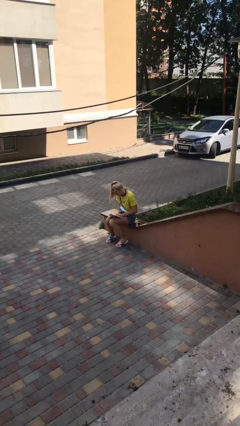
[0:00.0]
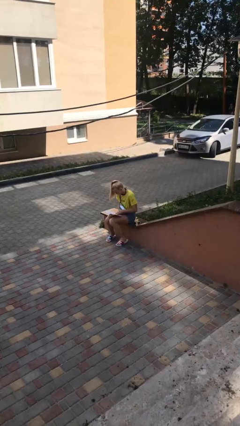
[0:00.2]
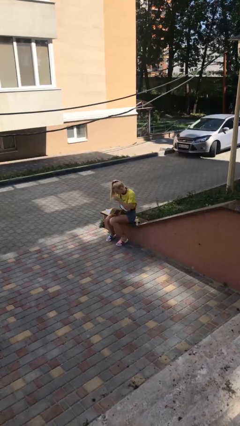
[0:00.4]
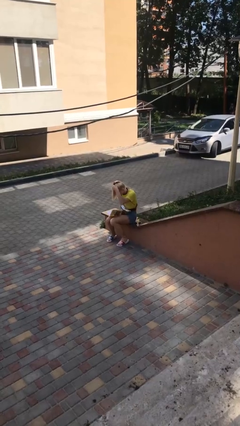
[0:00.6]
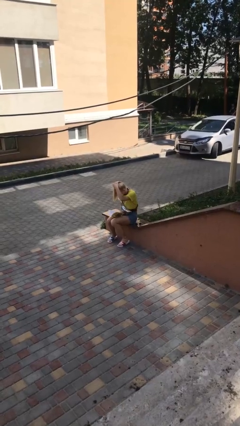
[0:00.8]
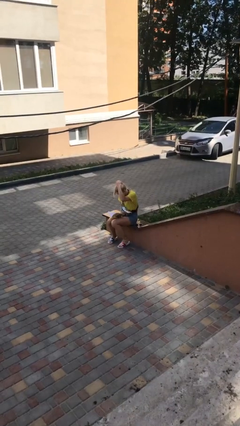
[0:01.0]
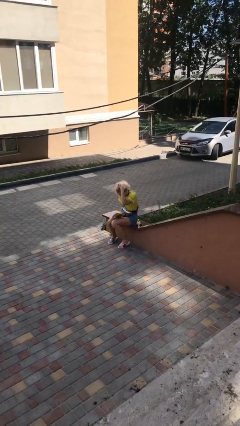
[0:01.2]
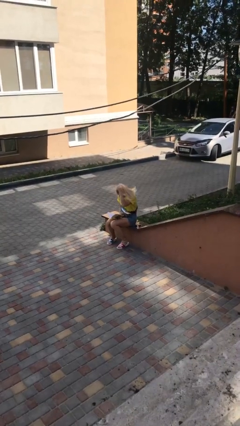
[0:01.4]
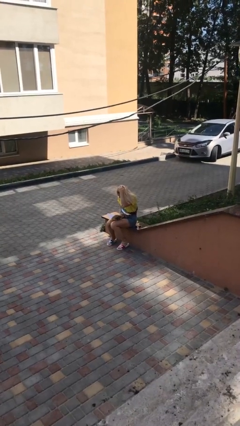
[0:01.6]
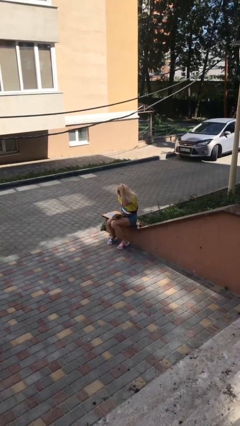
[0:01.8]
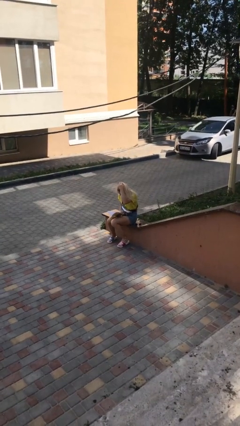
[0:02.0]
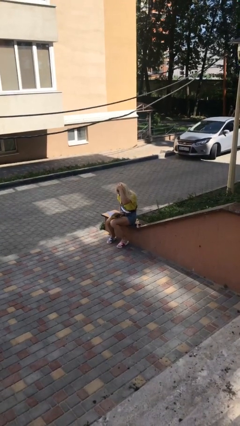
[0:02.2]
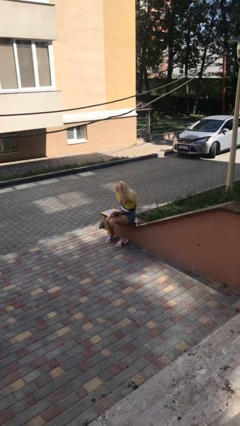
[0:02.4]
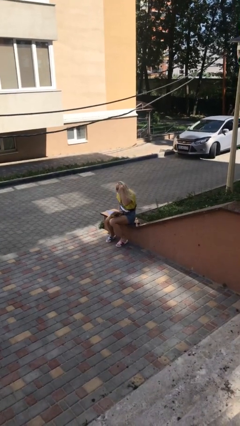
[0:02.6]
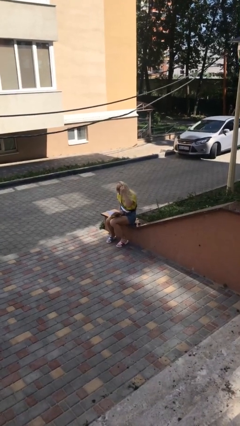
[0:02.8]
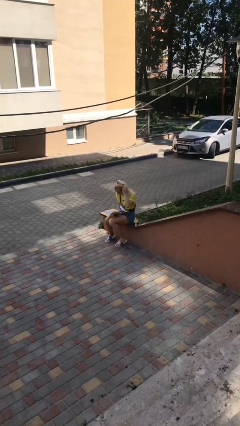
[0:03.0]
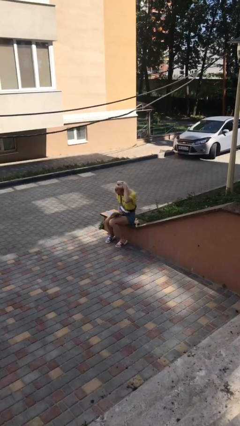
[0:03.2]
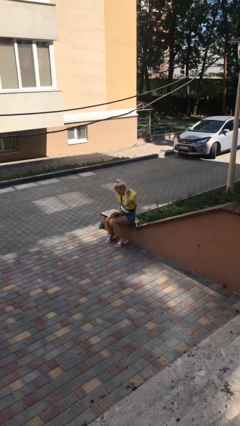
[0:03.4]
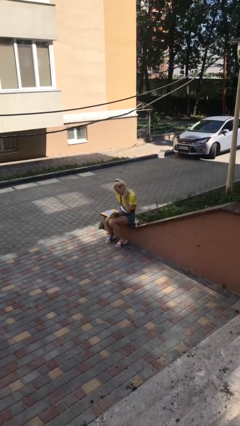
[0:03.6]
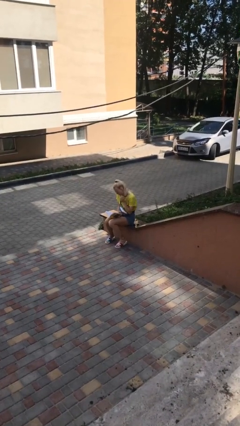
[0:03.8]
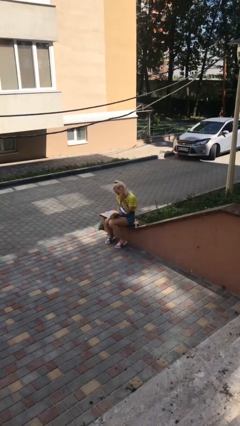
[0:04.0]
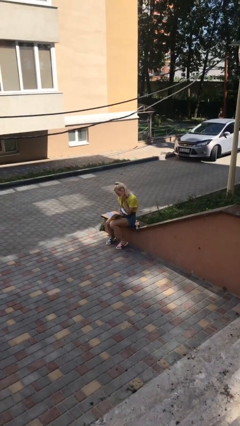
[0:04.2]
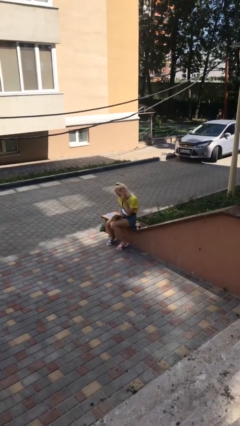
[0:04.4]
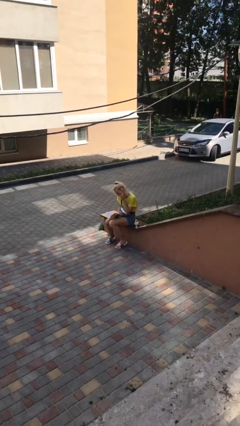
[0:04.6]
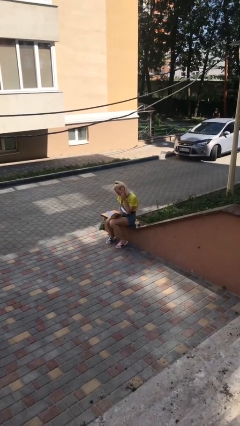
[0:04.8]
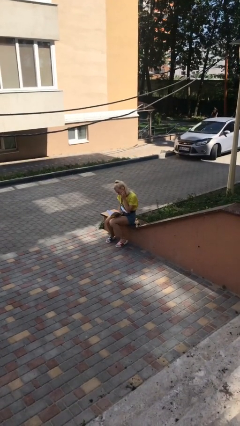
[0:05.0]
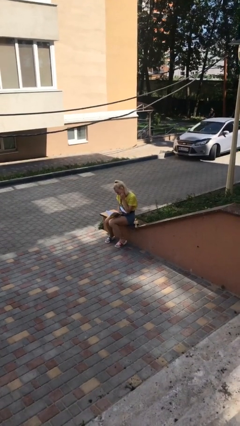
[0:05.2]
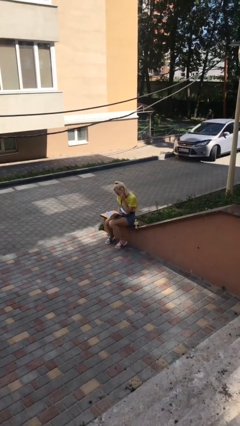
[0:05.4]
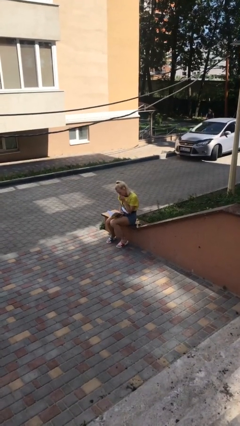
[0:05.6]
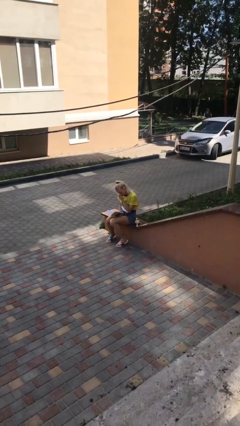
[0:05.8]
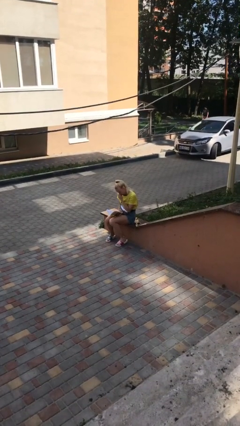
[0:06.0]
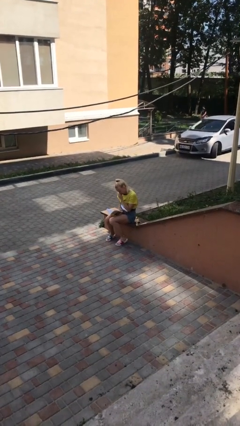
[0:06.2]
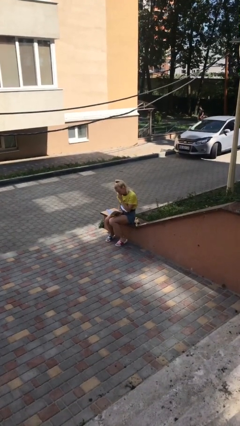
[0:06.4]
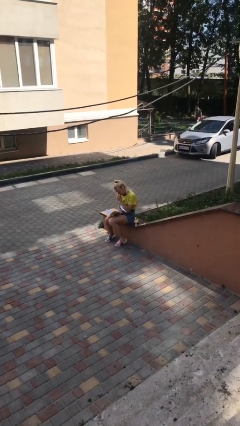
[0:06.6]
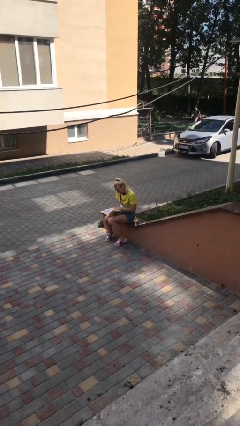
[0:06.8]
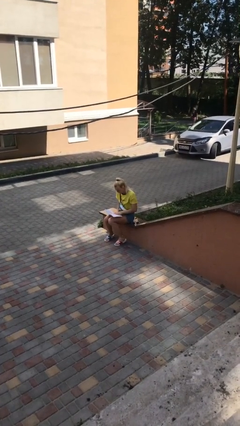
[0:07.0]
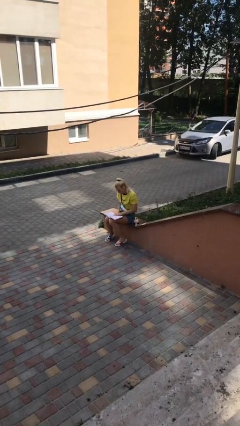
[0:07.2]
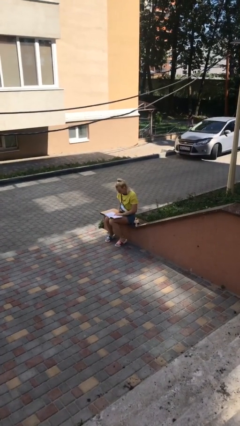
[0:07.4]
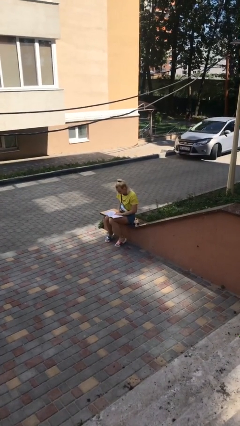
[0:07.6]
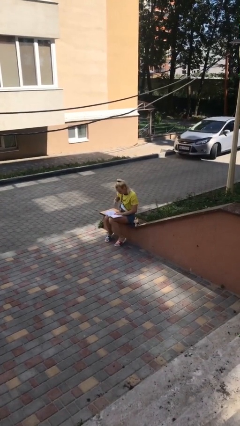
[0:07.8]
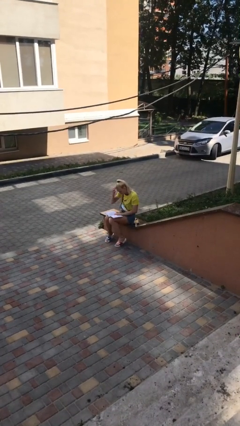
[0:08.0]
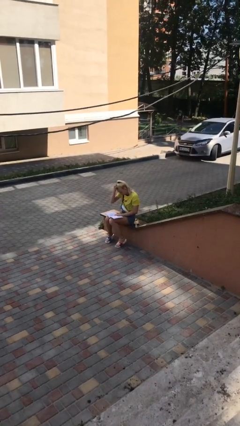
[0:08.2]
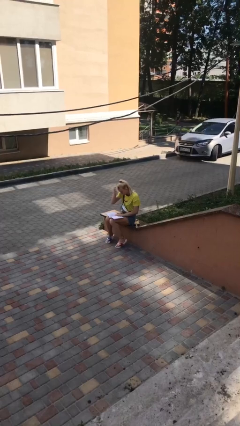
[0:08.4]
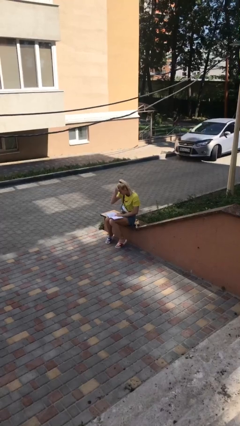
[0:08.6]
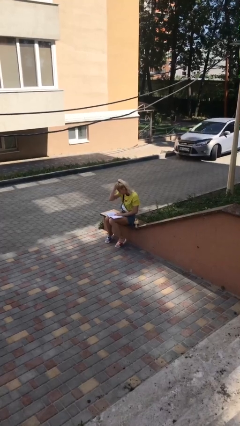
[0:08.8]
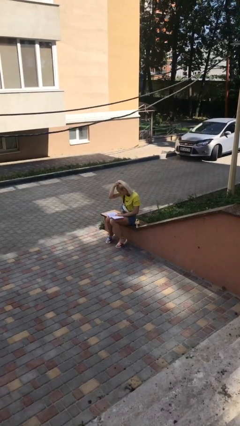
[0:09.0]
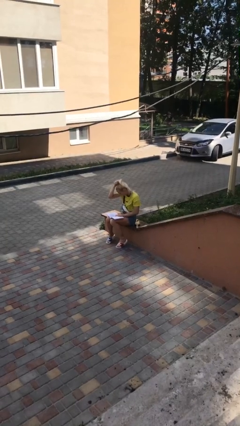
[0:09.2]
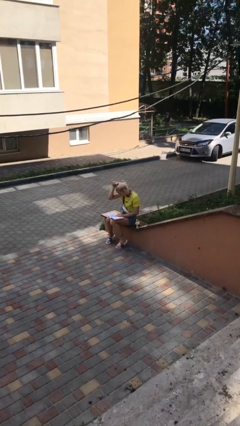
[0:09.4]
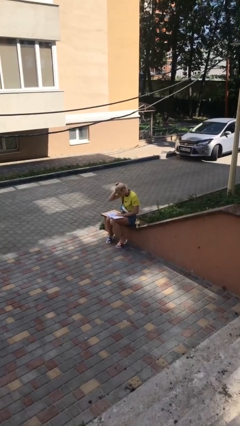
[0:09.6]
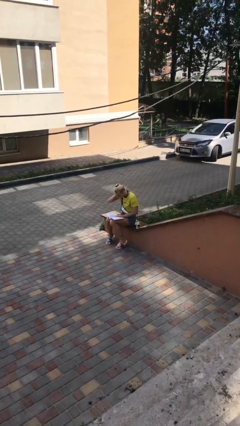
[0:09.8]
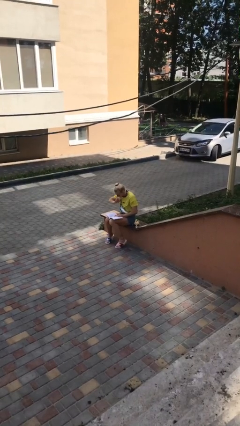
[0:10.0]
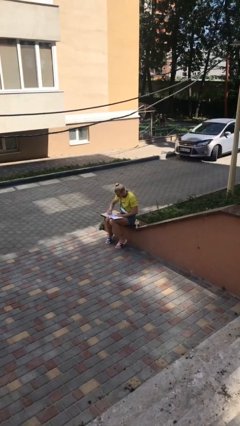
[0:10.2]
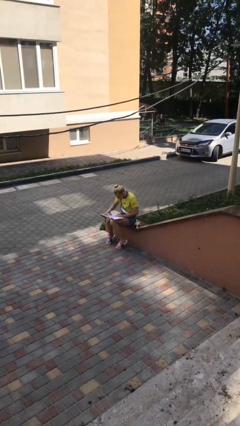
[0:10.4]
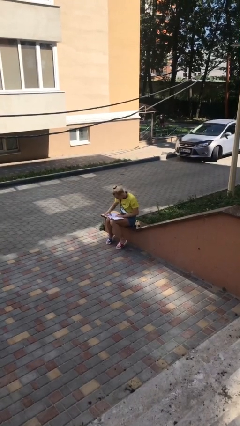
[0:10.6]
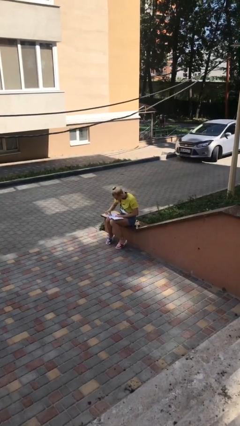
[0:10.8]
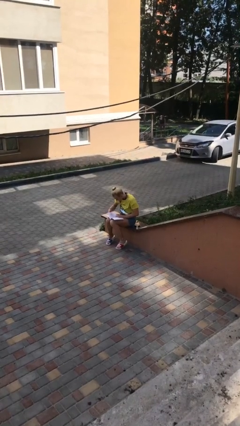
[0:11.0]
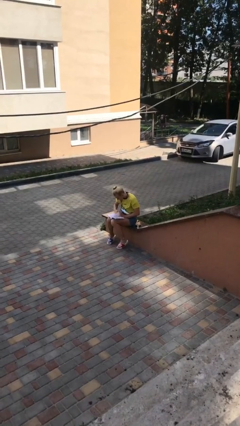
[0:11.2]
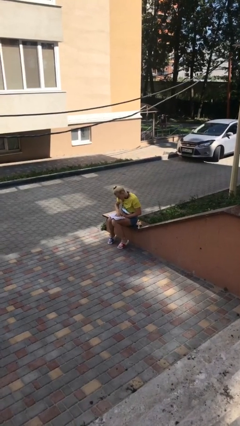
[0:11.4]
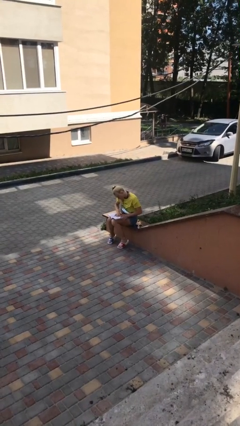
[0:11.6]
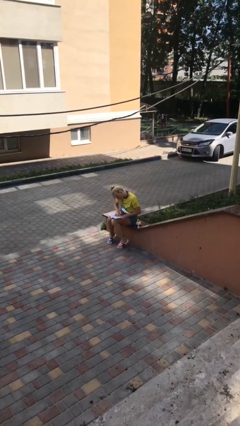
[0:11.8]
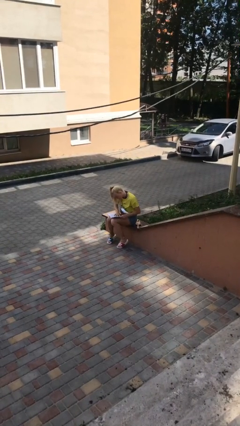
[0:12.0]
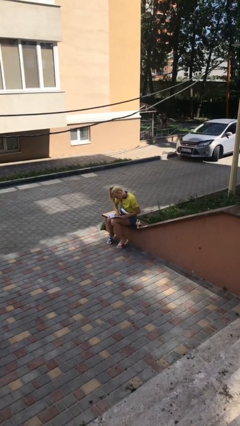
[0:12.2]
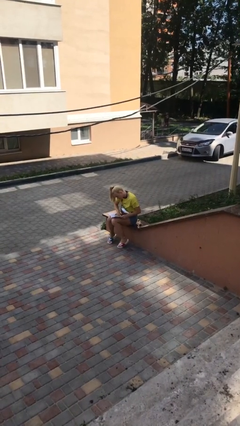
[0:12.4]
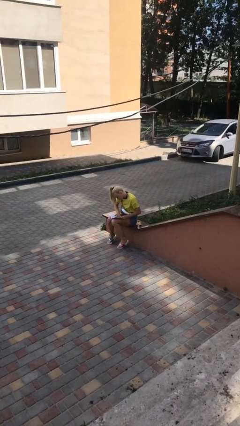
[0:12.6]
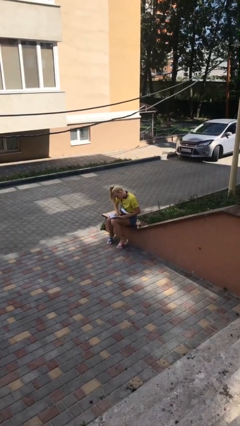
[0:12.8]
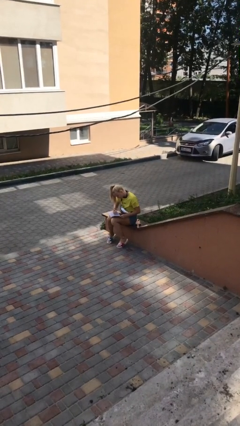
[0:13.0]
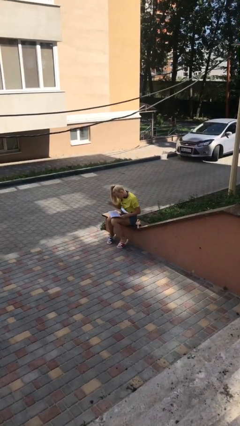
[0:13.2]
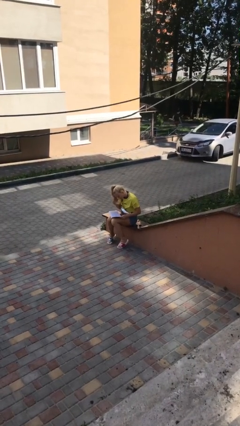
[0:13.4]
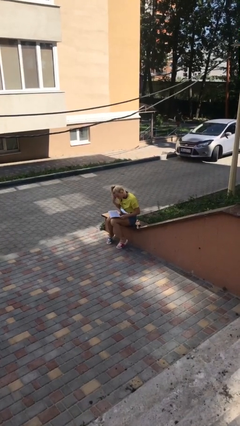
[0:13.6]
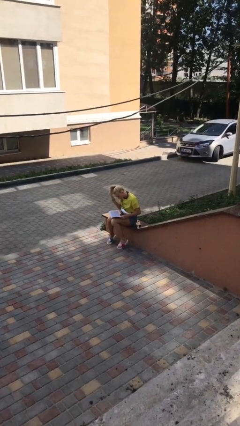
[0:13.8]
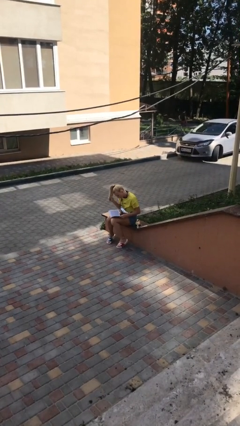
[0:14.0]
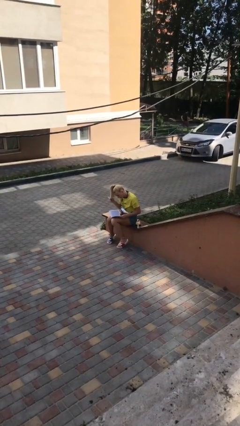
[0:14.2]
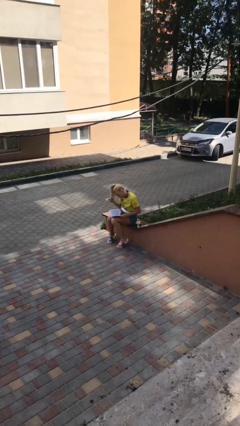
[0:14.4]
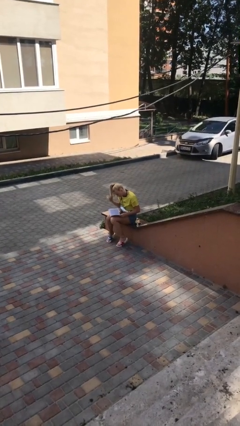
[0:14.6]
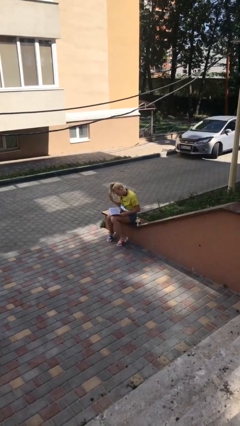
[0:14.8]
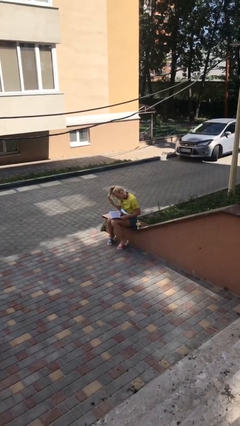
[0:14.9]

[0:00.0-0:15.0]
person reads document

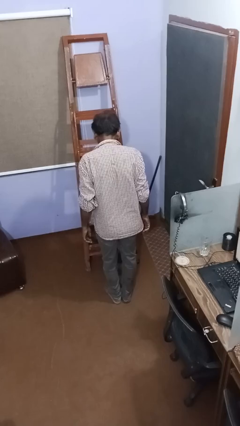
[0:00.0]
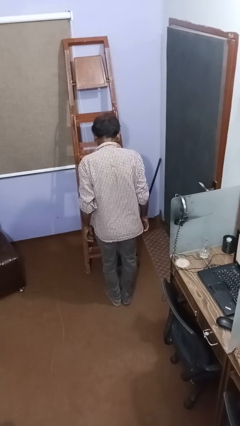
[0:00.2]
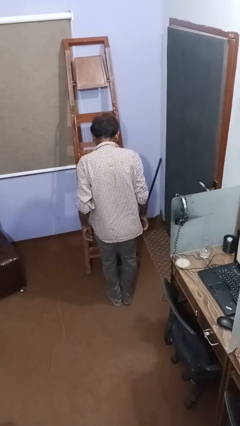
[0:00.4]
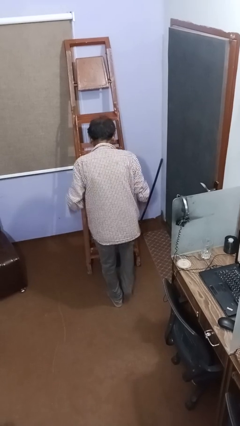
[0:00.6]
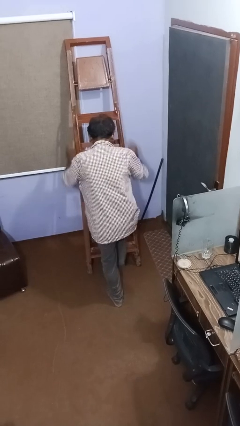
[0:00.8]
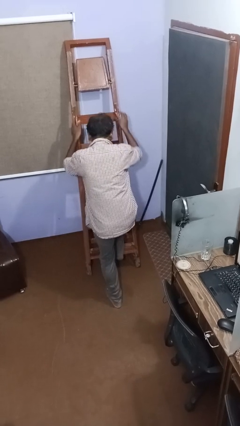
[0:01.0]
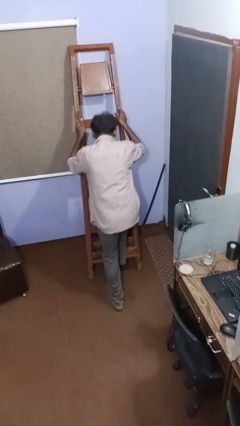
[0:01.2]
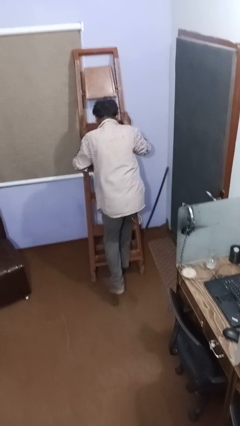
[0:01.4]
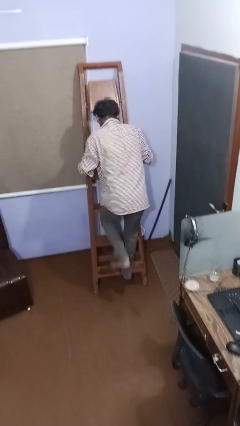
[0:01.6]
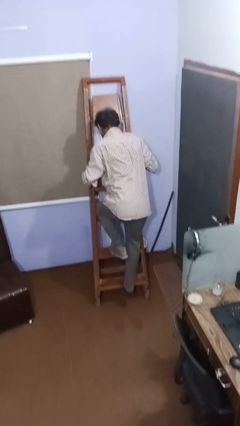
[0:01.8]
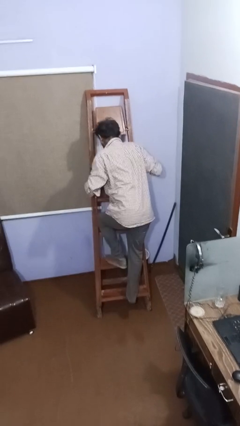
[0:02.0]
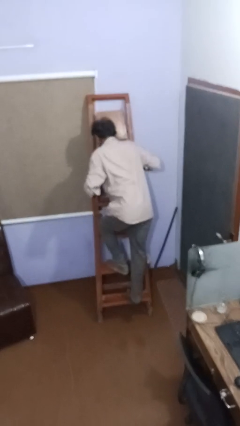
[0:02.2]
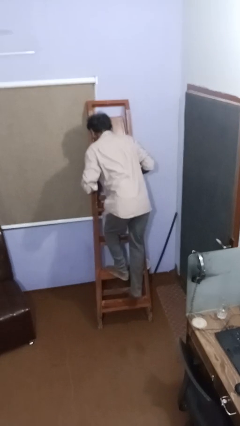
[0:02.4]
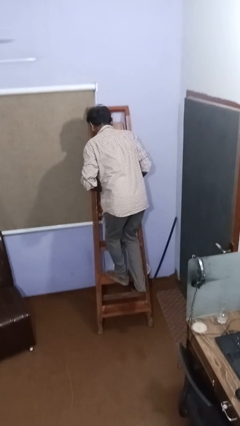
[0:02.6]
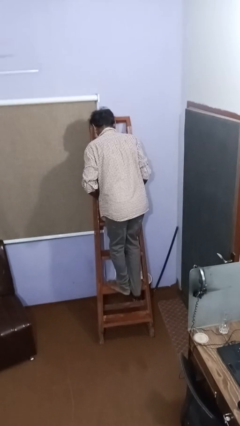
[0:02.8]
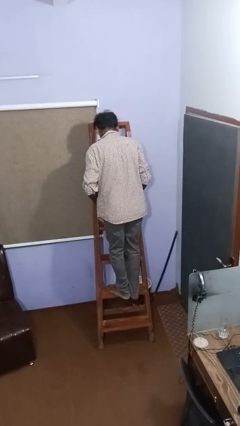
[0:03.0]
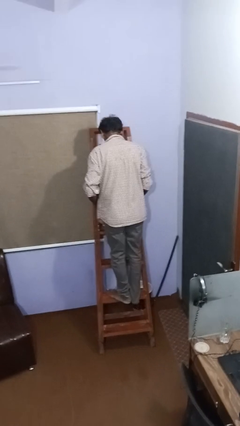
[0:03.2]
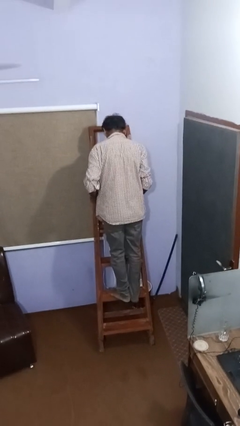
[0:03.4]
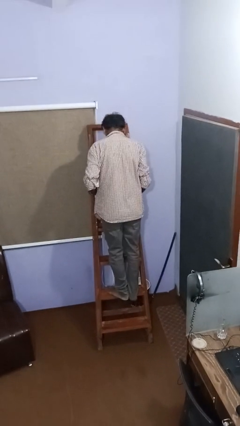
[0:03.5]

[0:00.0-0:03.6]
person climbs up ladder
